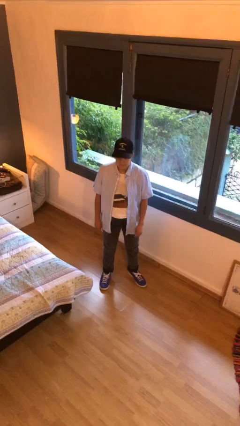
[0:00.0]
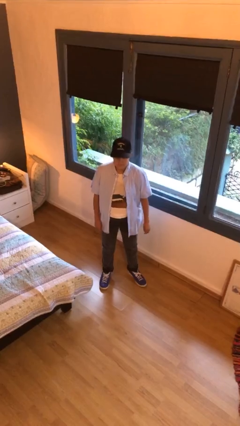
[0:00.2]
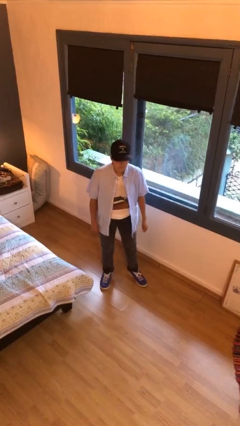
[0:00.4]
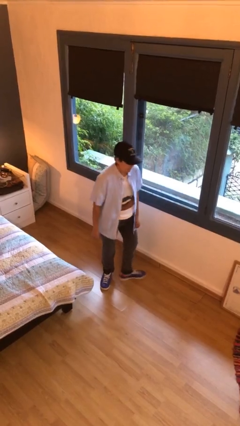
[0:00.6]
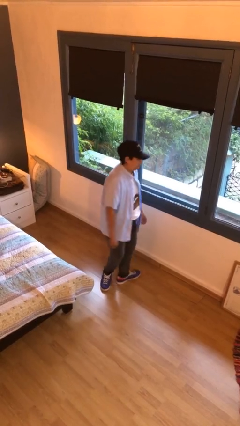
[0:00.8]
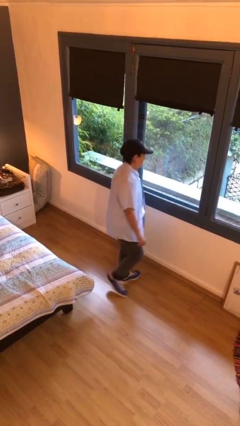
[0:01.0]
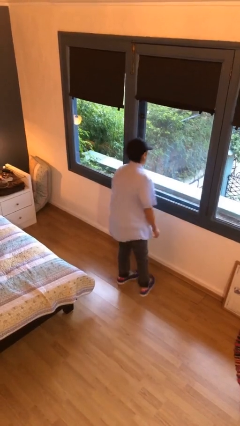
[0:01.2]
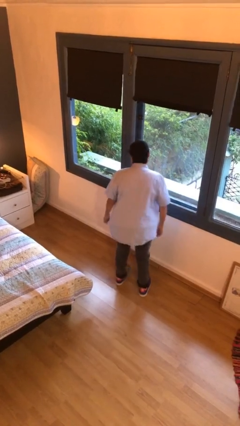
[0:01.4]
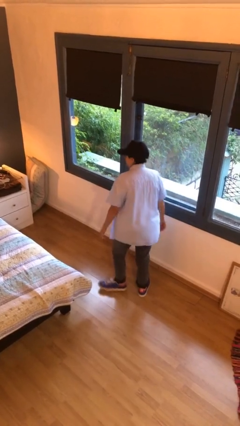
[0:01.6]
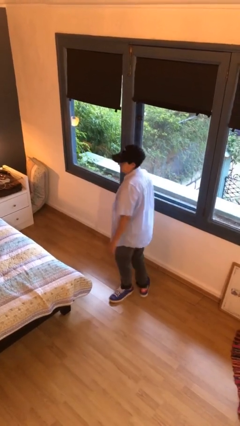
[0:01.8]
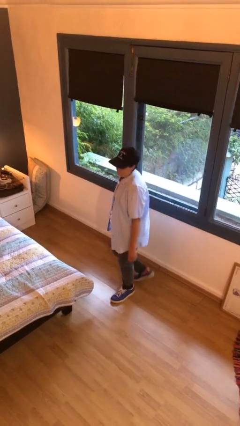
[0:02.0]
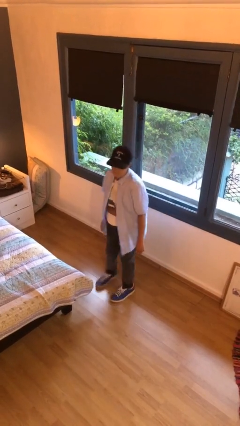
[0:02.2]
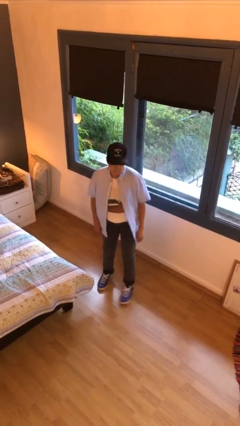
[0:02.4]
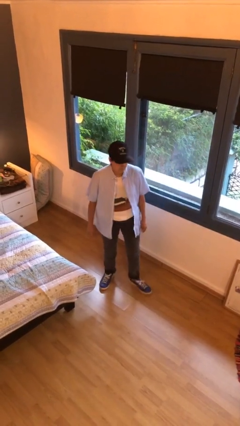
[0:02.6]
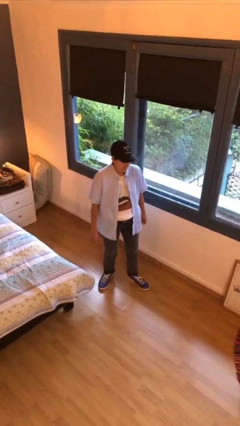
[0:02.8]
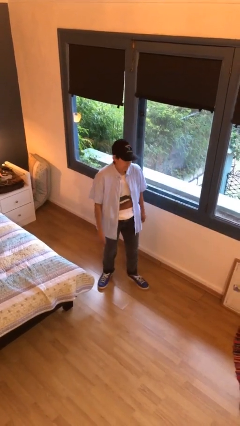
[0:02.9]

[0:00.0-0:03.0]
person twirls

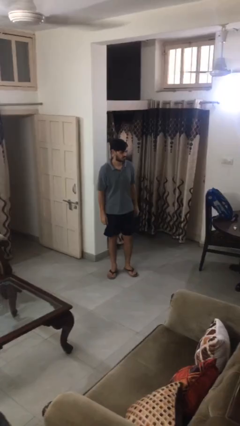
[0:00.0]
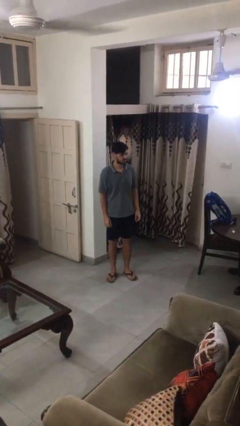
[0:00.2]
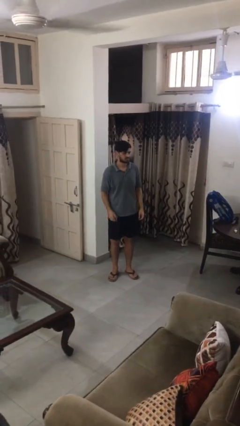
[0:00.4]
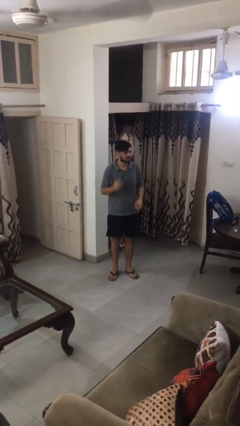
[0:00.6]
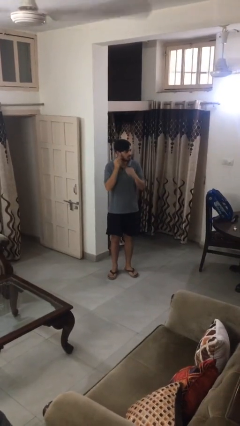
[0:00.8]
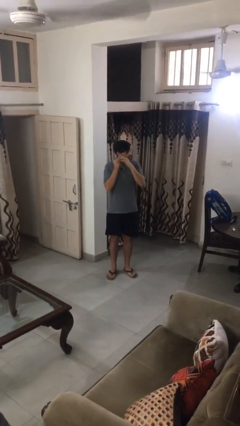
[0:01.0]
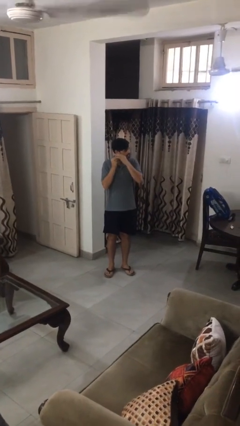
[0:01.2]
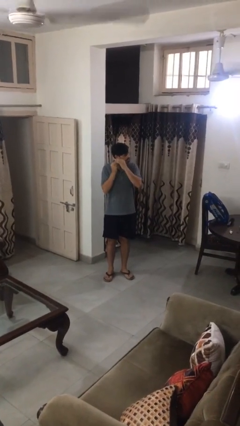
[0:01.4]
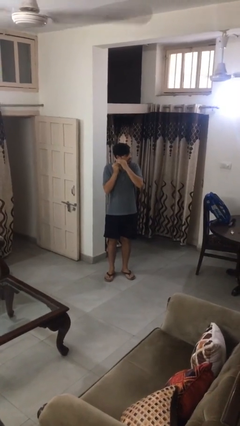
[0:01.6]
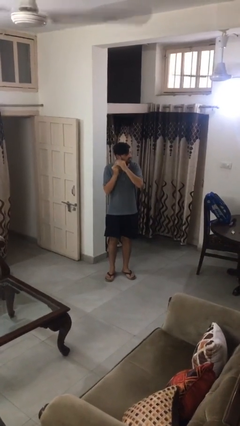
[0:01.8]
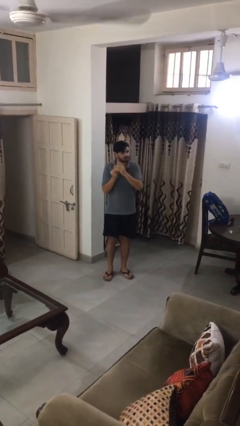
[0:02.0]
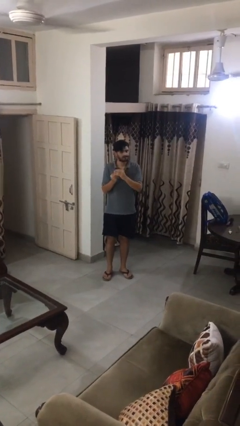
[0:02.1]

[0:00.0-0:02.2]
person takes off earrings

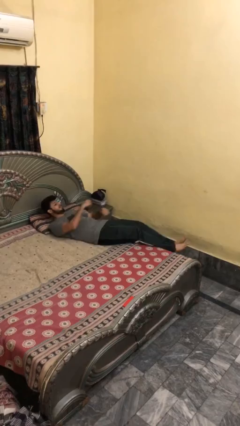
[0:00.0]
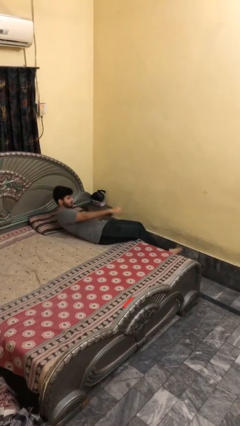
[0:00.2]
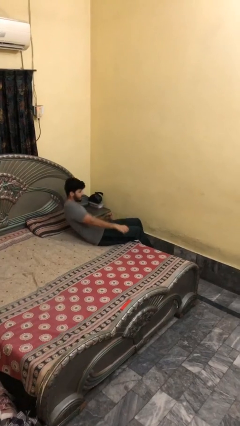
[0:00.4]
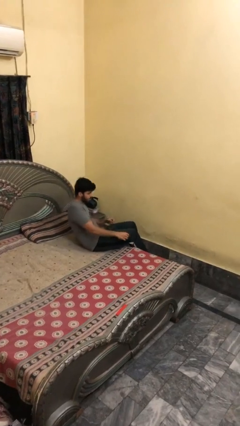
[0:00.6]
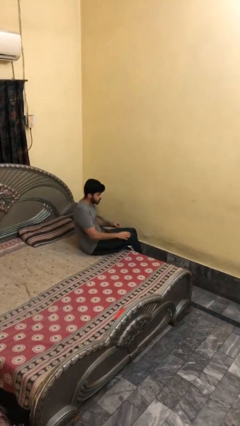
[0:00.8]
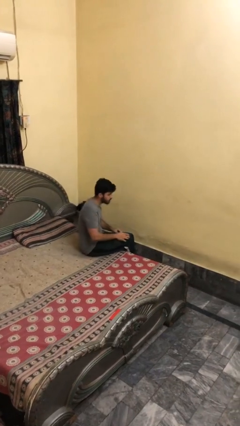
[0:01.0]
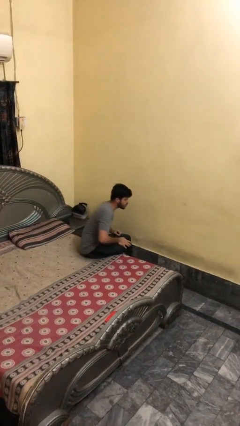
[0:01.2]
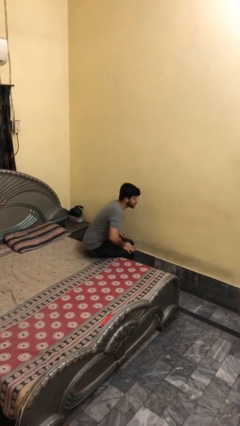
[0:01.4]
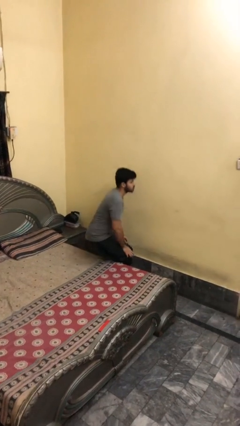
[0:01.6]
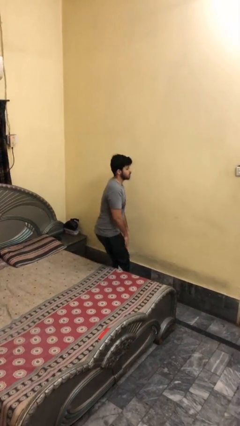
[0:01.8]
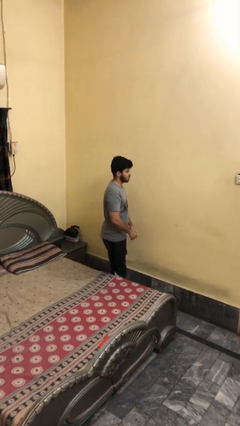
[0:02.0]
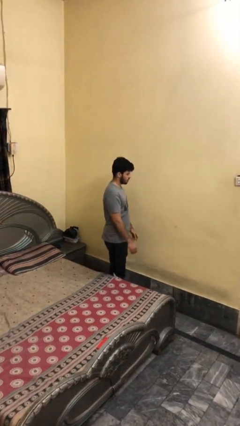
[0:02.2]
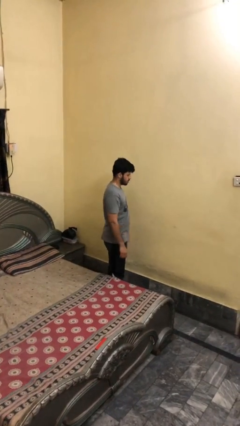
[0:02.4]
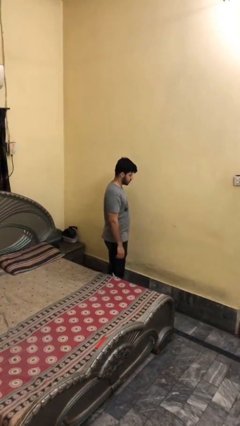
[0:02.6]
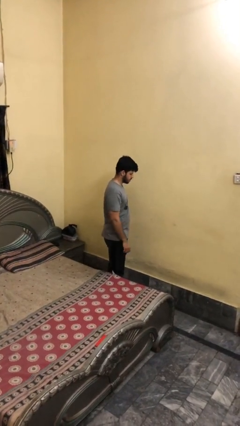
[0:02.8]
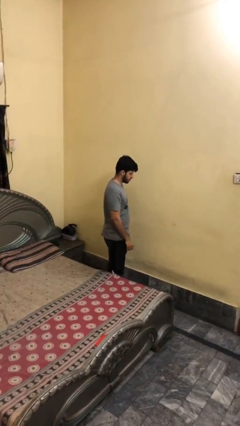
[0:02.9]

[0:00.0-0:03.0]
person stands up

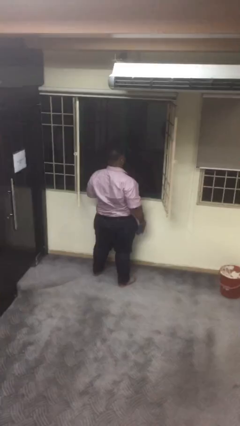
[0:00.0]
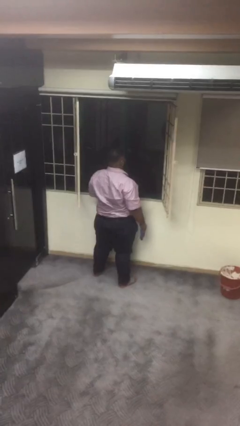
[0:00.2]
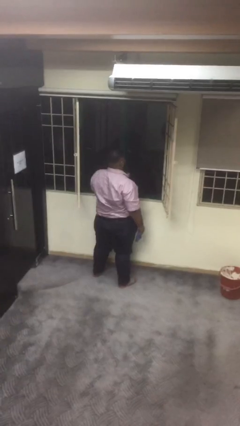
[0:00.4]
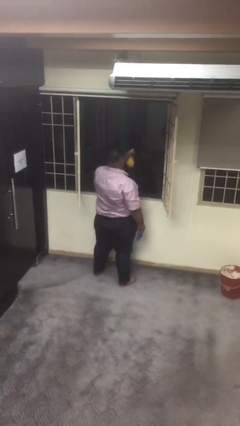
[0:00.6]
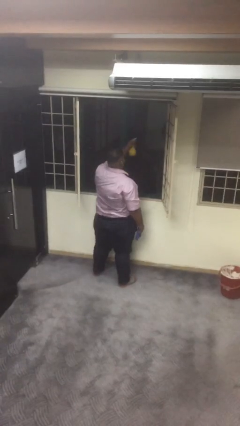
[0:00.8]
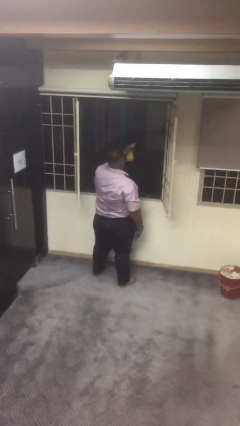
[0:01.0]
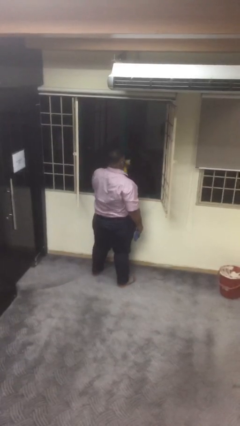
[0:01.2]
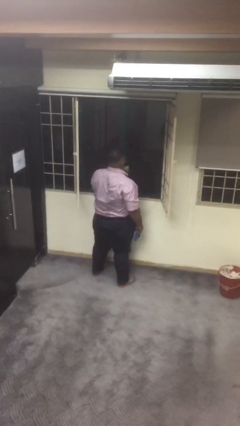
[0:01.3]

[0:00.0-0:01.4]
person sprays from bottle

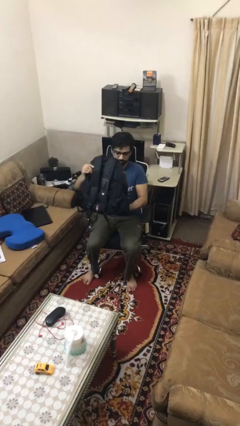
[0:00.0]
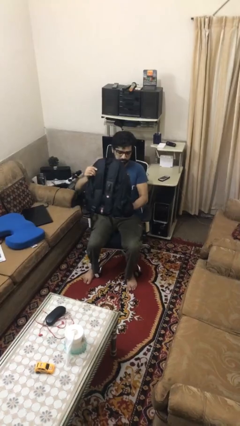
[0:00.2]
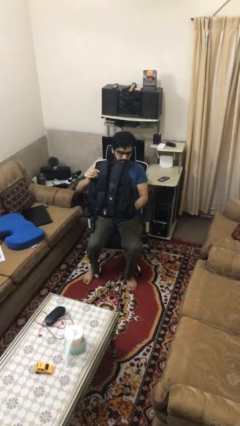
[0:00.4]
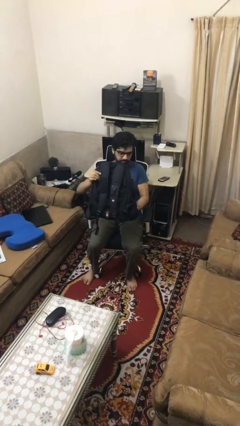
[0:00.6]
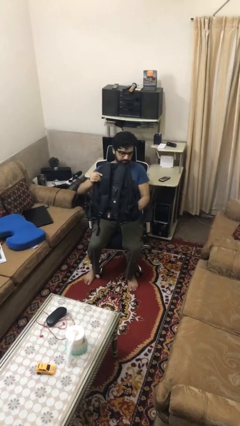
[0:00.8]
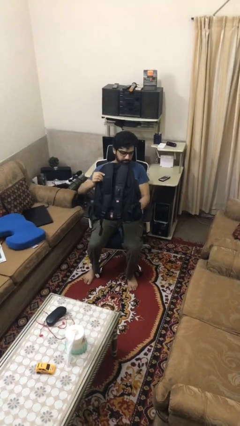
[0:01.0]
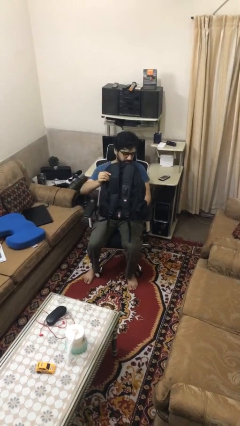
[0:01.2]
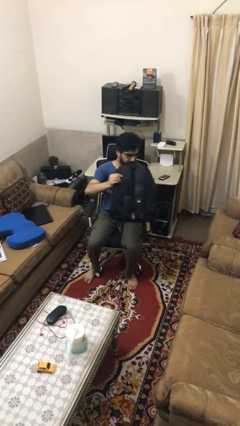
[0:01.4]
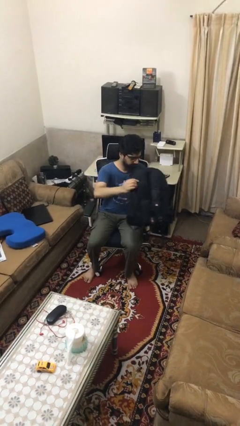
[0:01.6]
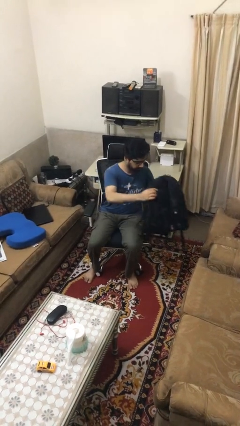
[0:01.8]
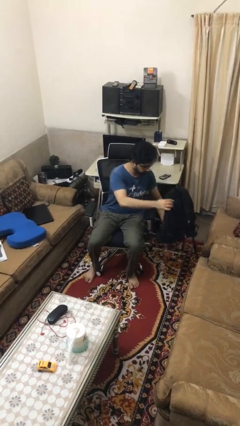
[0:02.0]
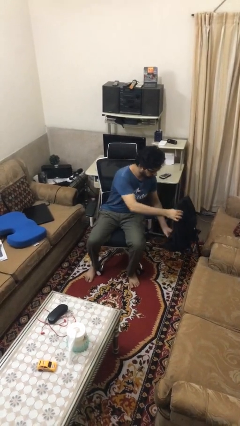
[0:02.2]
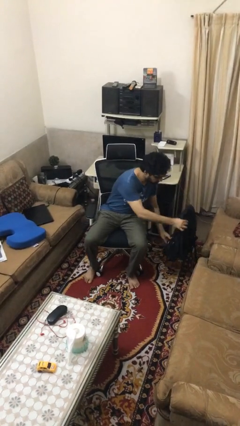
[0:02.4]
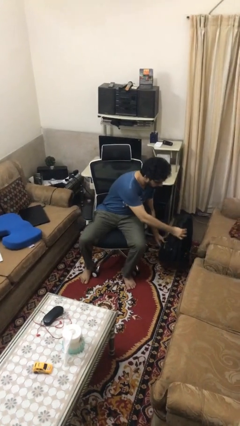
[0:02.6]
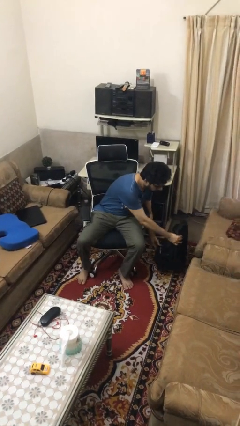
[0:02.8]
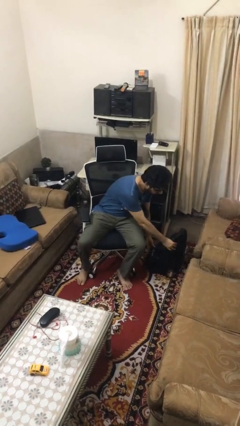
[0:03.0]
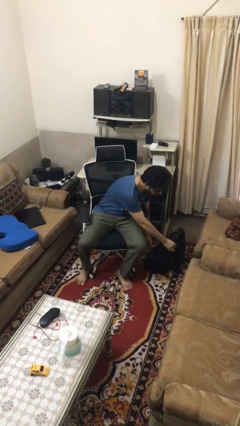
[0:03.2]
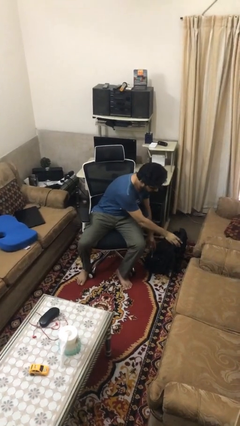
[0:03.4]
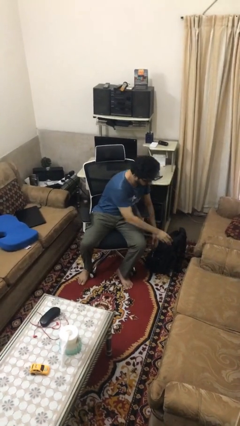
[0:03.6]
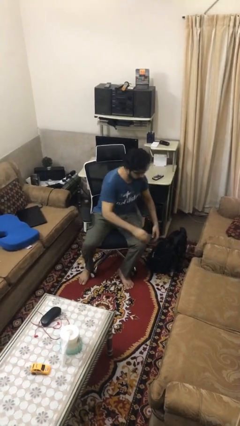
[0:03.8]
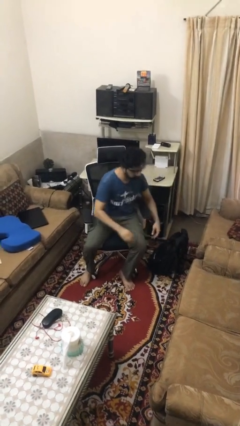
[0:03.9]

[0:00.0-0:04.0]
person puts down object on floor

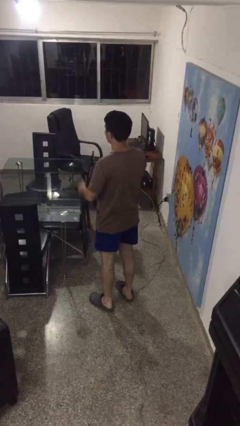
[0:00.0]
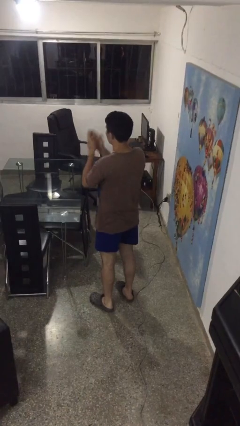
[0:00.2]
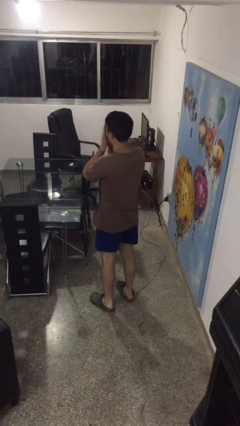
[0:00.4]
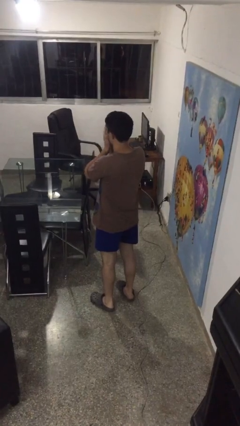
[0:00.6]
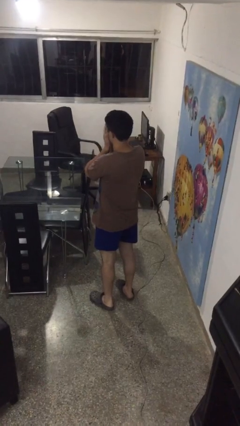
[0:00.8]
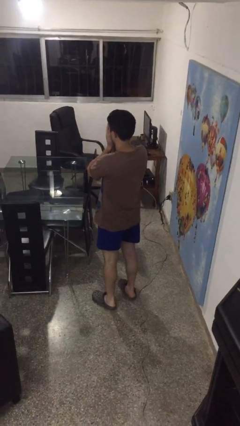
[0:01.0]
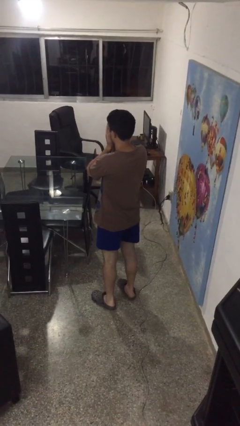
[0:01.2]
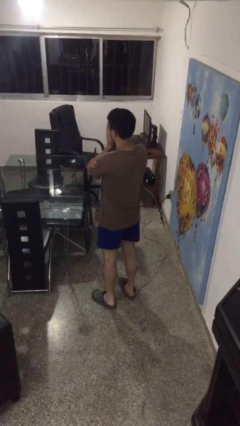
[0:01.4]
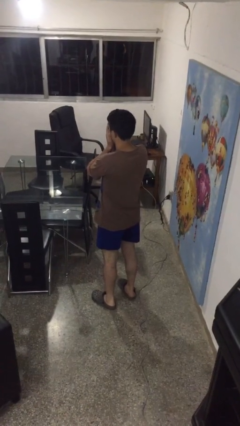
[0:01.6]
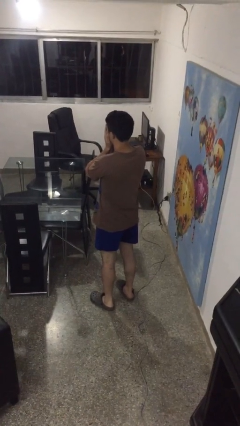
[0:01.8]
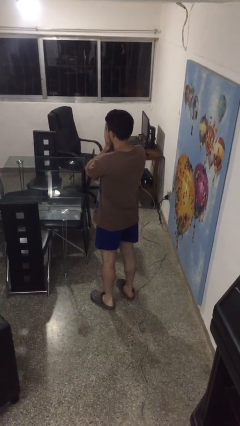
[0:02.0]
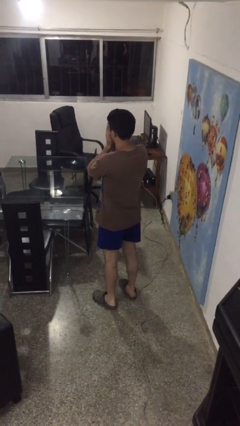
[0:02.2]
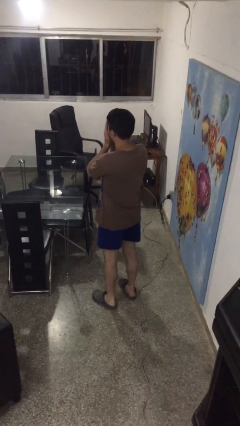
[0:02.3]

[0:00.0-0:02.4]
person covers face with hands

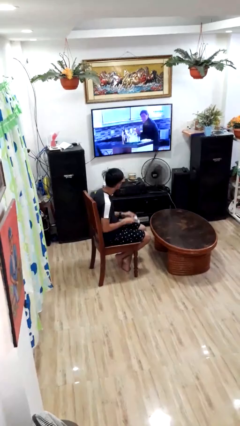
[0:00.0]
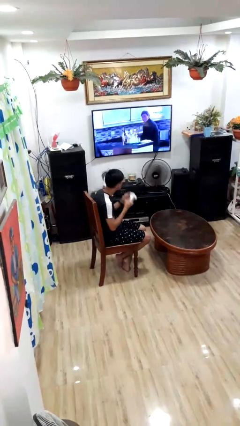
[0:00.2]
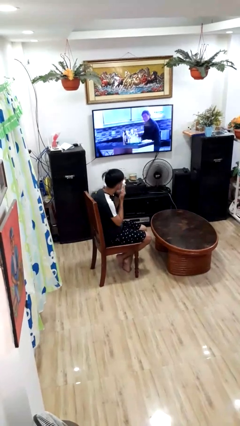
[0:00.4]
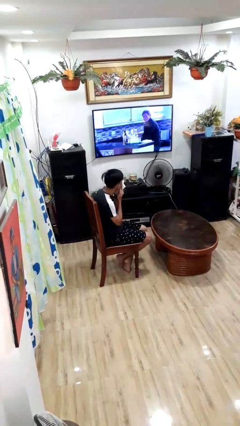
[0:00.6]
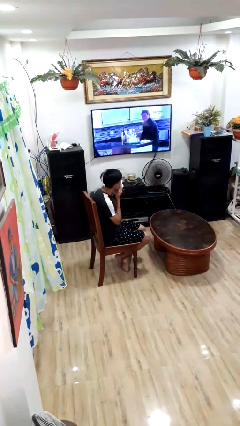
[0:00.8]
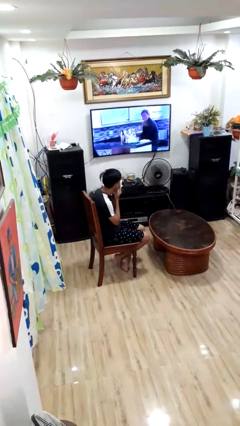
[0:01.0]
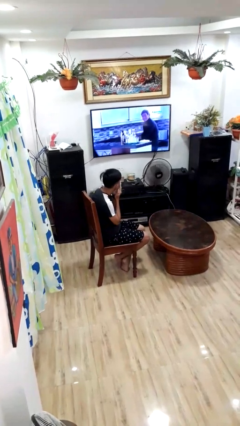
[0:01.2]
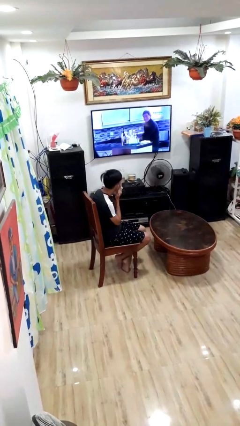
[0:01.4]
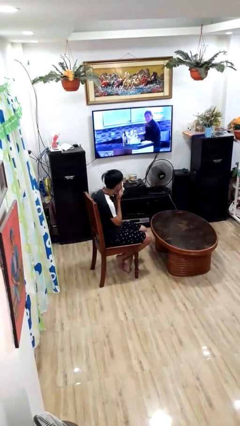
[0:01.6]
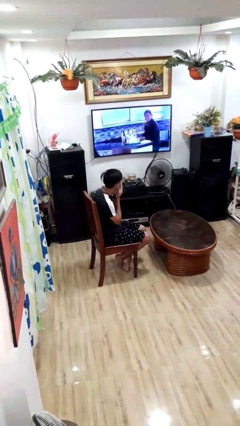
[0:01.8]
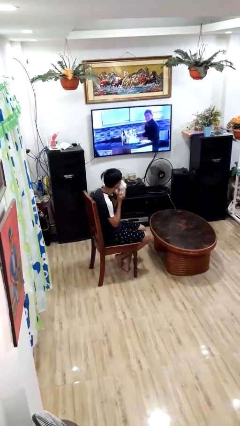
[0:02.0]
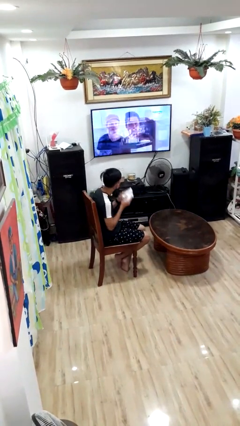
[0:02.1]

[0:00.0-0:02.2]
person wipes mouth with napkin
